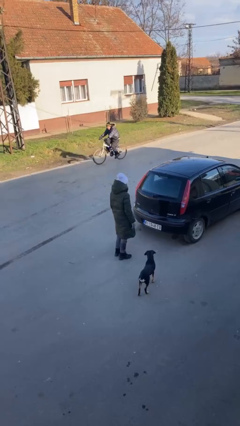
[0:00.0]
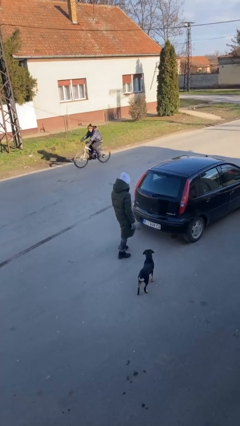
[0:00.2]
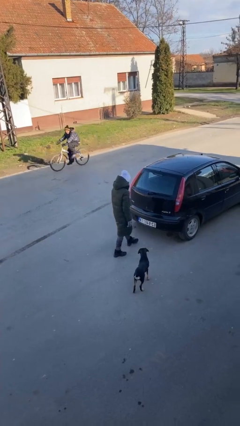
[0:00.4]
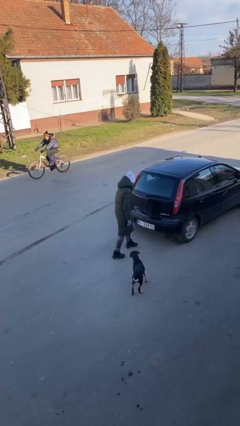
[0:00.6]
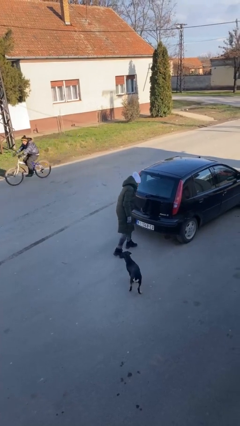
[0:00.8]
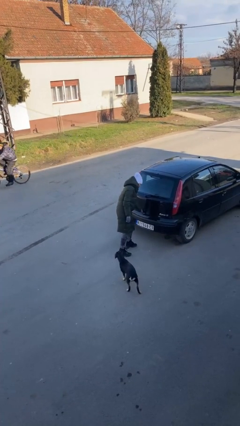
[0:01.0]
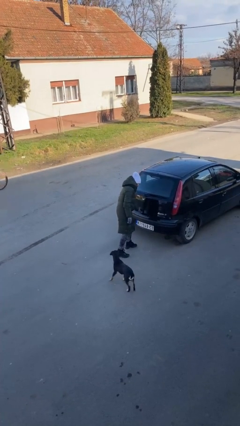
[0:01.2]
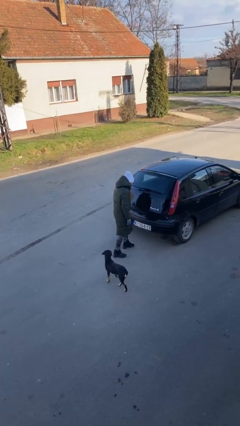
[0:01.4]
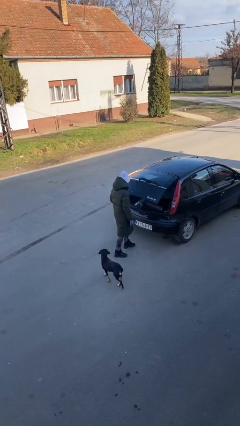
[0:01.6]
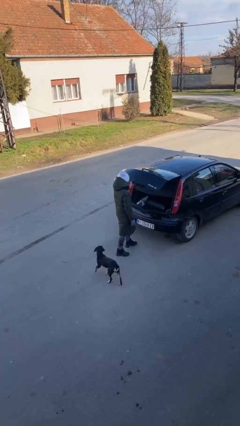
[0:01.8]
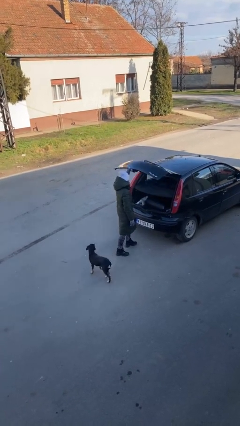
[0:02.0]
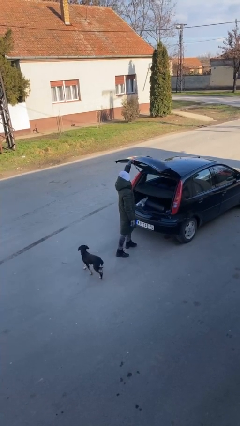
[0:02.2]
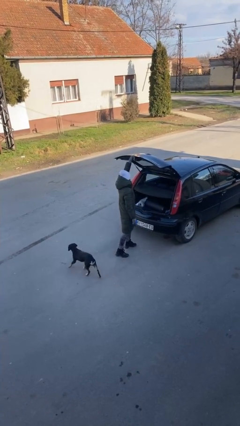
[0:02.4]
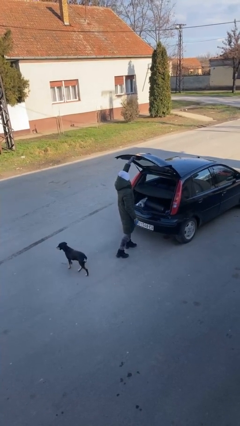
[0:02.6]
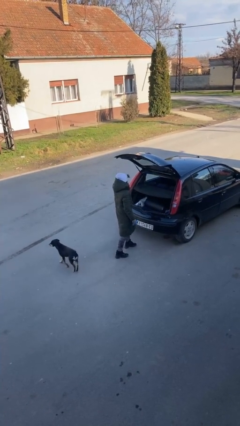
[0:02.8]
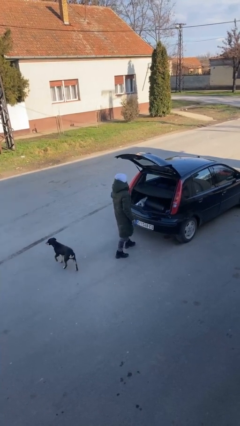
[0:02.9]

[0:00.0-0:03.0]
person opens car trunk

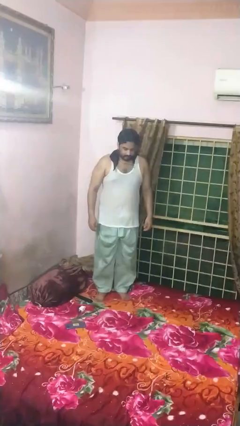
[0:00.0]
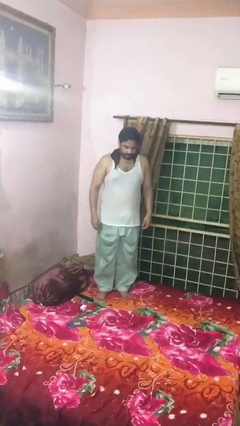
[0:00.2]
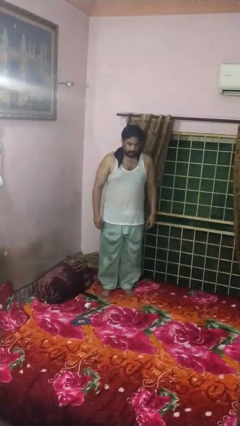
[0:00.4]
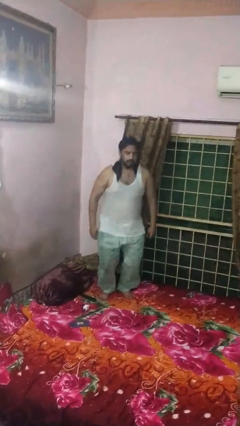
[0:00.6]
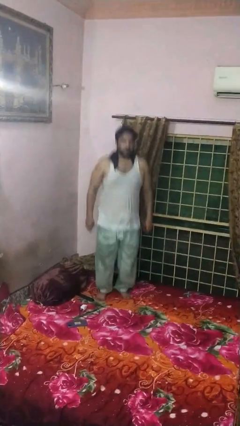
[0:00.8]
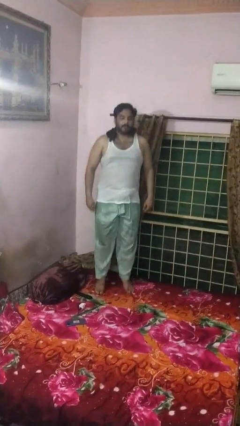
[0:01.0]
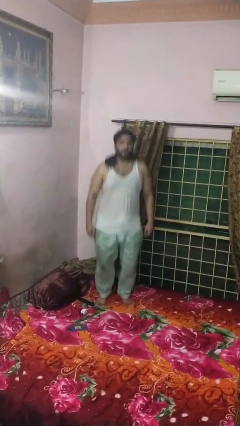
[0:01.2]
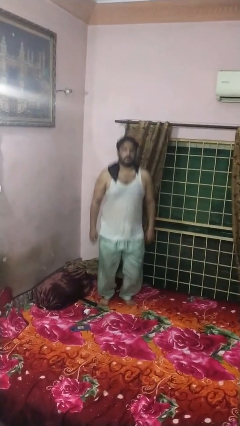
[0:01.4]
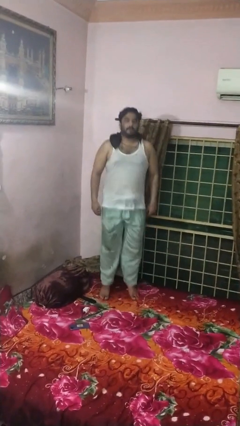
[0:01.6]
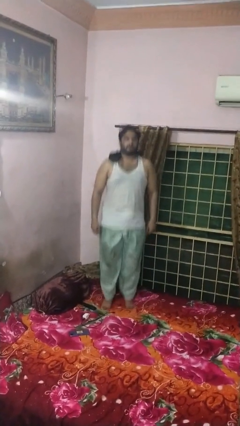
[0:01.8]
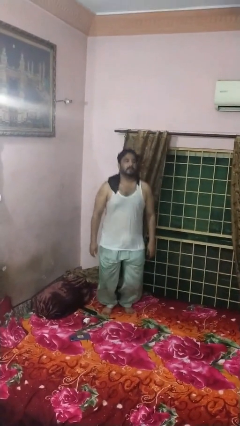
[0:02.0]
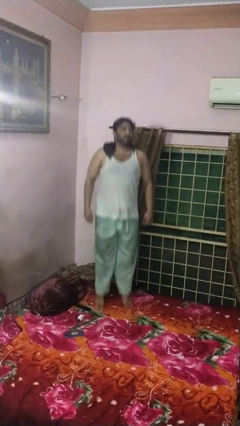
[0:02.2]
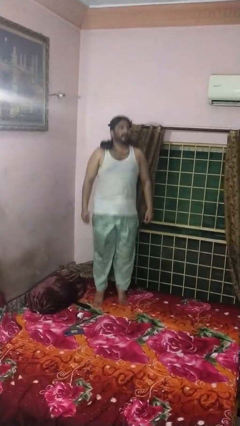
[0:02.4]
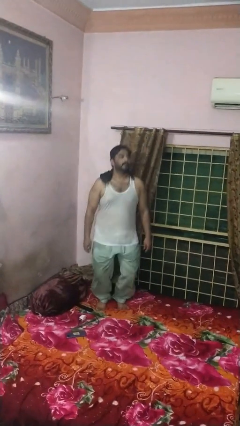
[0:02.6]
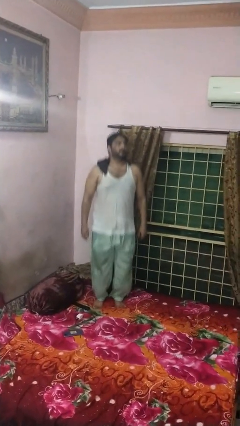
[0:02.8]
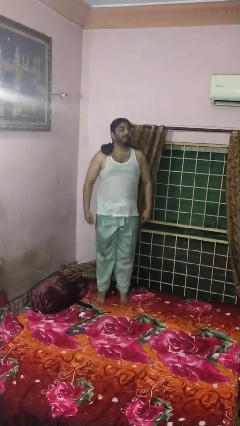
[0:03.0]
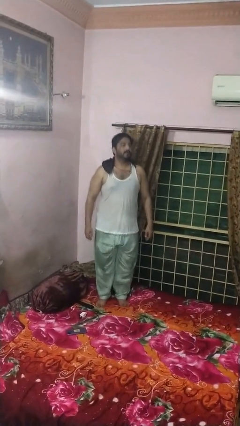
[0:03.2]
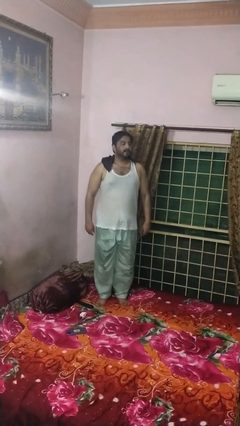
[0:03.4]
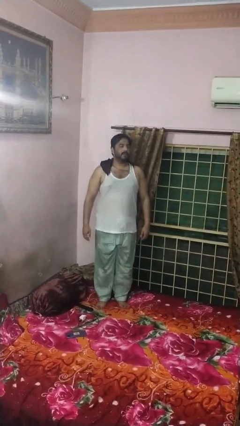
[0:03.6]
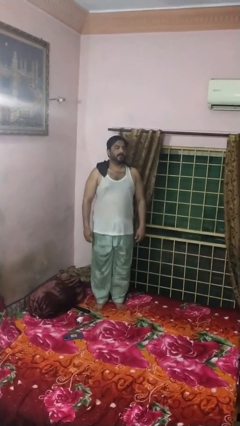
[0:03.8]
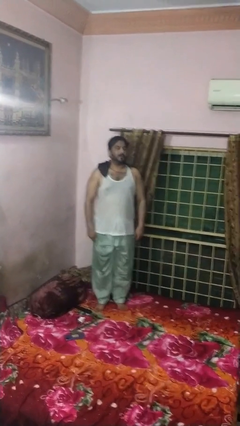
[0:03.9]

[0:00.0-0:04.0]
person jumps on bed

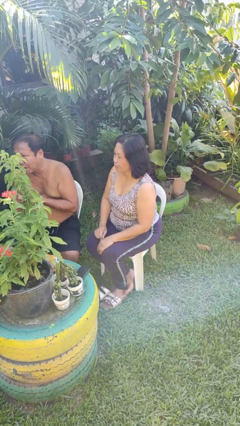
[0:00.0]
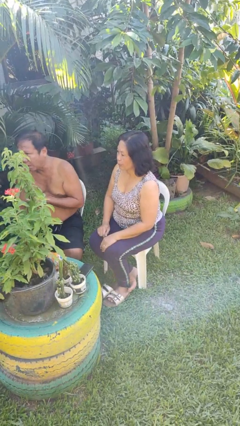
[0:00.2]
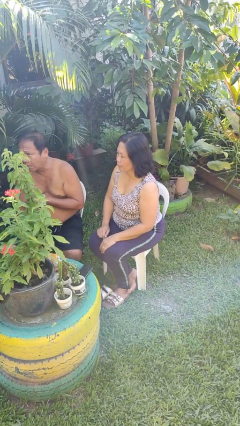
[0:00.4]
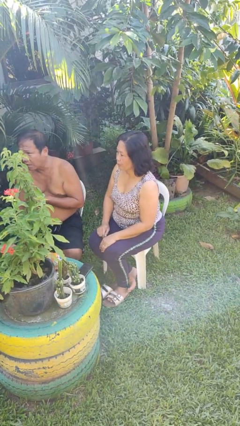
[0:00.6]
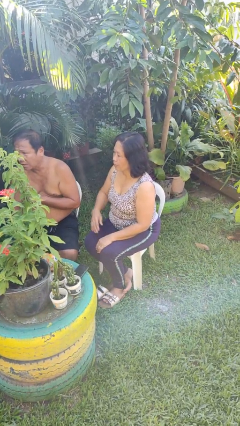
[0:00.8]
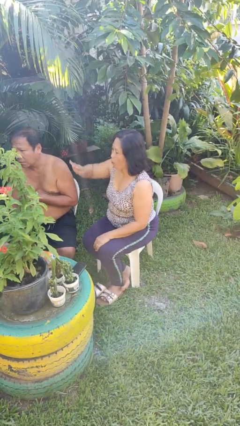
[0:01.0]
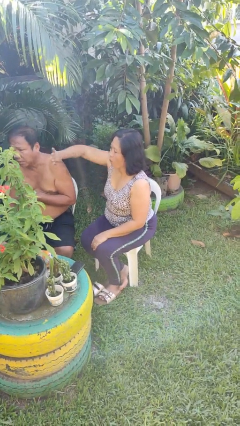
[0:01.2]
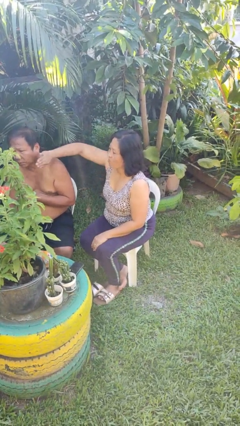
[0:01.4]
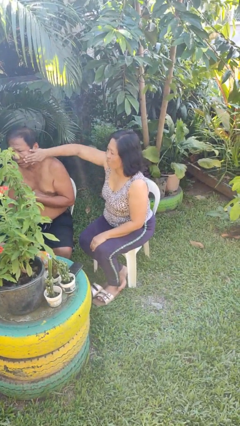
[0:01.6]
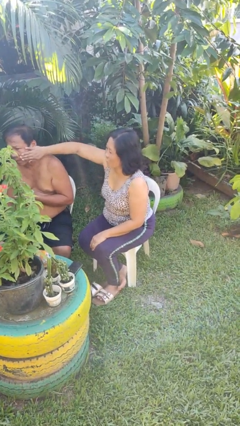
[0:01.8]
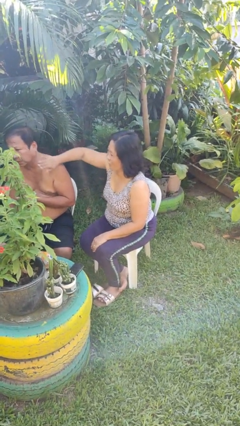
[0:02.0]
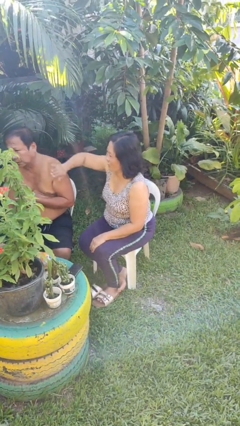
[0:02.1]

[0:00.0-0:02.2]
person touches face of person

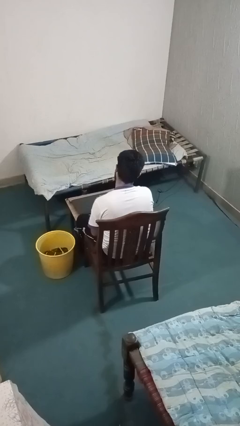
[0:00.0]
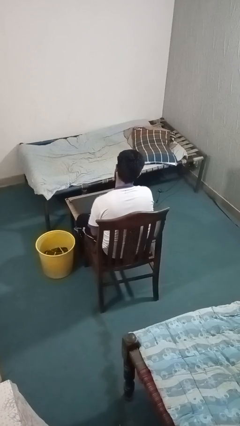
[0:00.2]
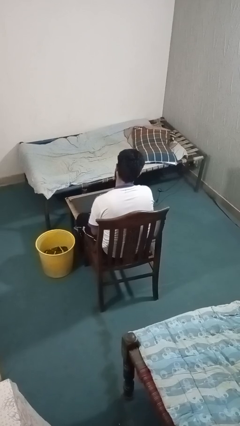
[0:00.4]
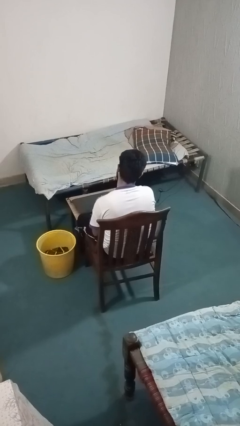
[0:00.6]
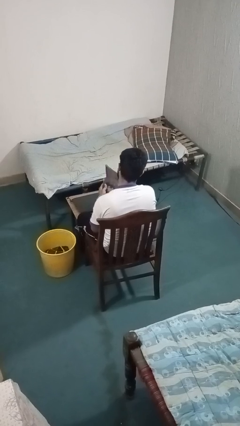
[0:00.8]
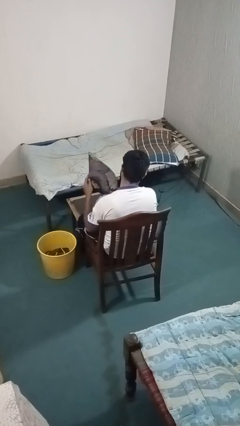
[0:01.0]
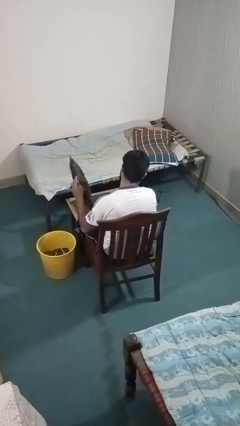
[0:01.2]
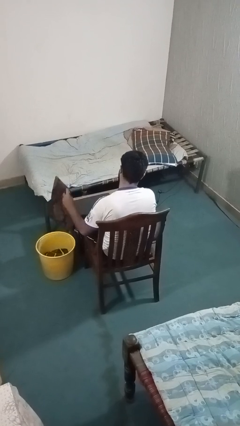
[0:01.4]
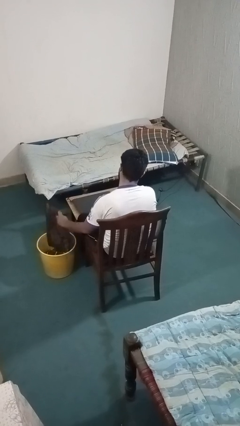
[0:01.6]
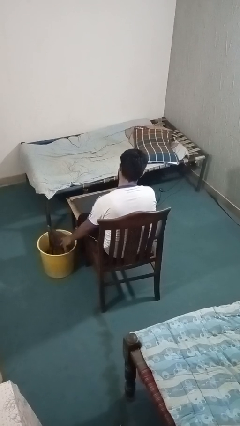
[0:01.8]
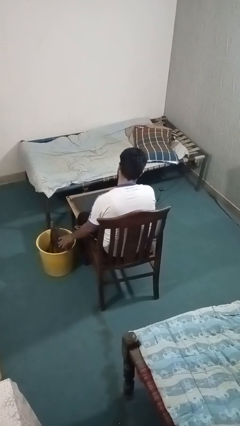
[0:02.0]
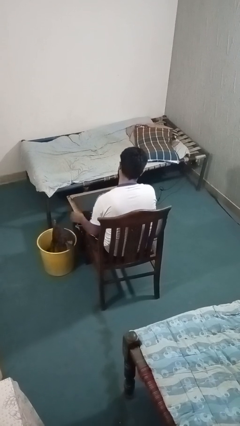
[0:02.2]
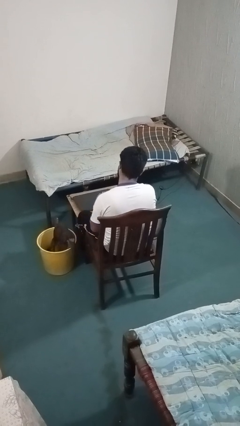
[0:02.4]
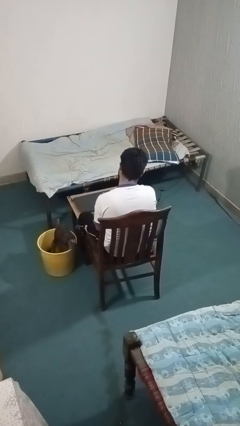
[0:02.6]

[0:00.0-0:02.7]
person puts object into basket

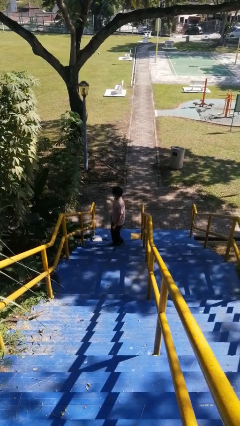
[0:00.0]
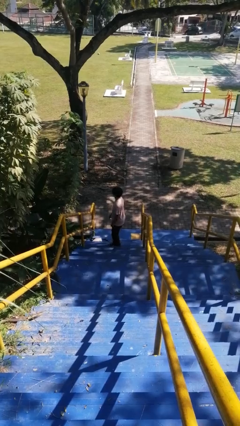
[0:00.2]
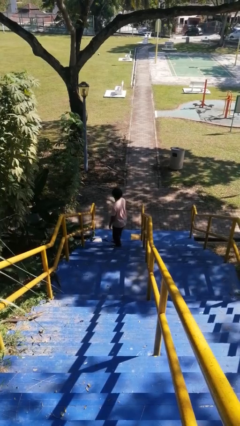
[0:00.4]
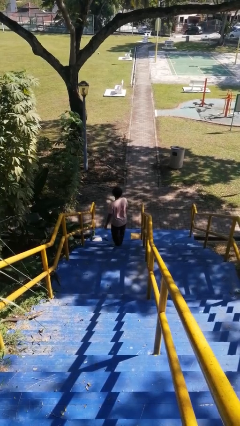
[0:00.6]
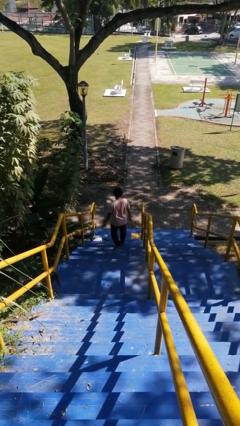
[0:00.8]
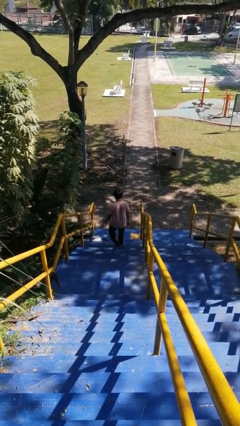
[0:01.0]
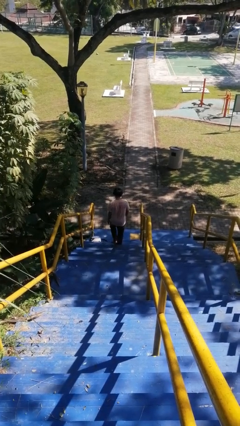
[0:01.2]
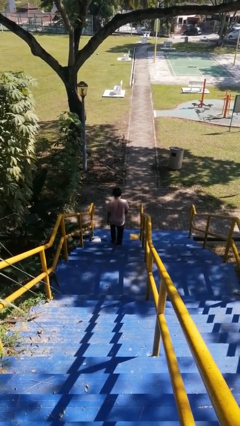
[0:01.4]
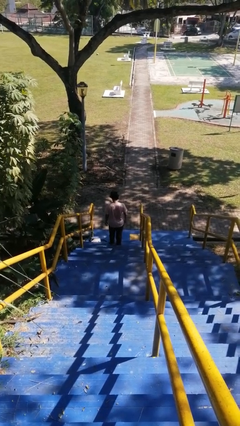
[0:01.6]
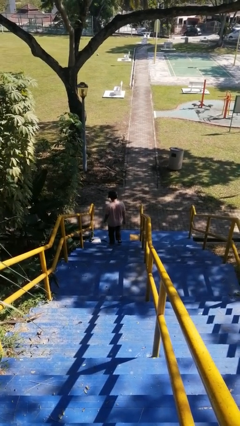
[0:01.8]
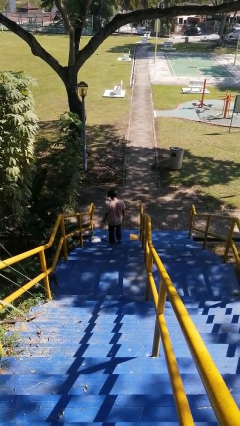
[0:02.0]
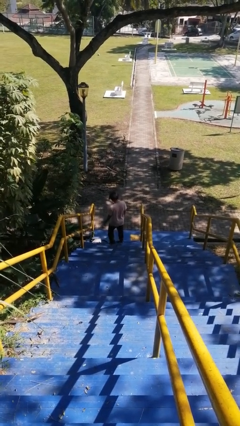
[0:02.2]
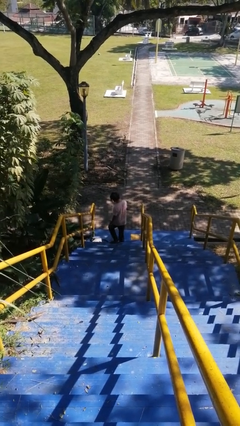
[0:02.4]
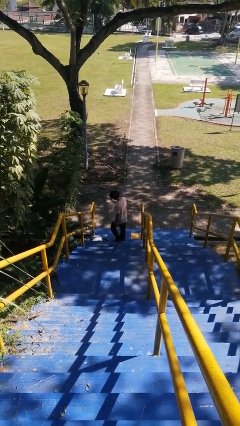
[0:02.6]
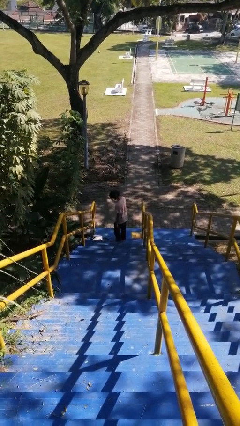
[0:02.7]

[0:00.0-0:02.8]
person climbs down stairs

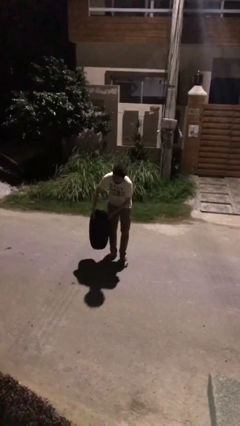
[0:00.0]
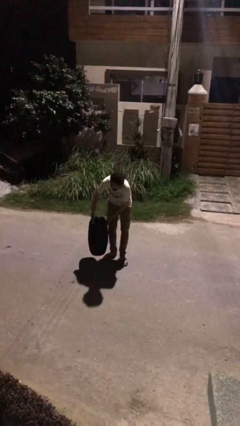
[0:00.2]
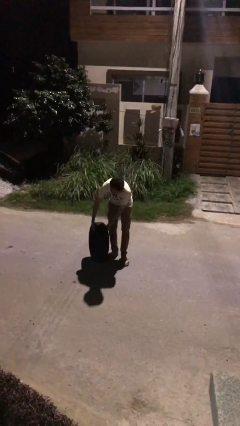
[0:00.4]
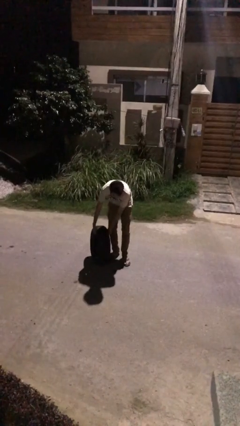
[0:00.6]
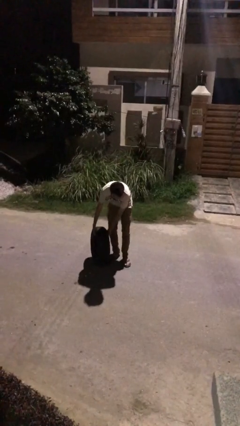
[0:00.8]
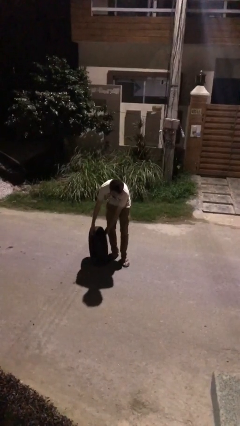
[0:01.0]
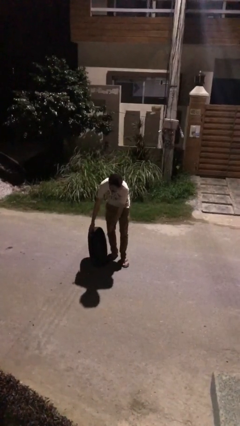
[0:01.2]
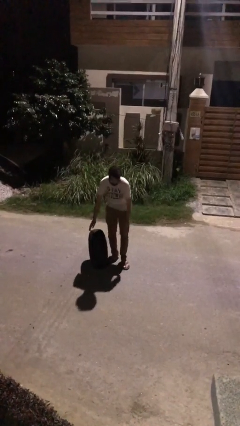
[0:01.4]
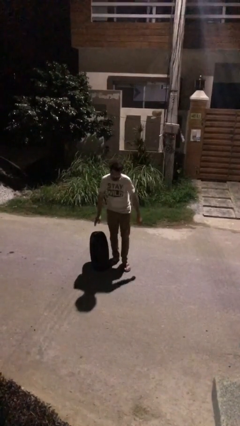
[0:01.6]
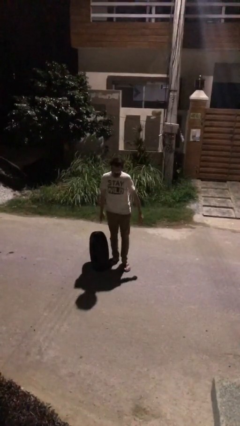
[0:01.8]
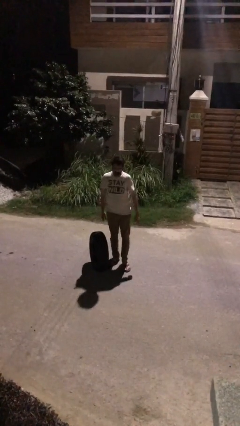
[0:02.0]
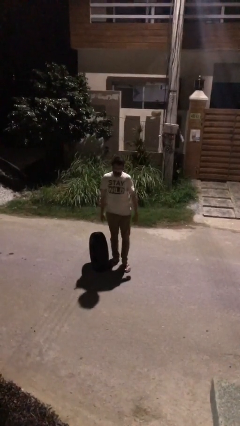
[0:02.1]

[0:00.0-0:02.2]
person puts down object on floor

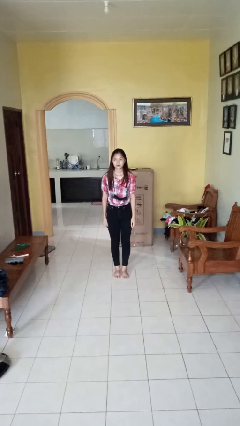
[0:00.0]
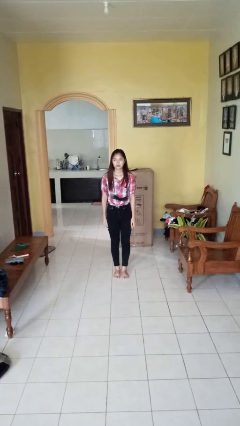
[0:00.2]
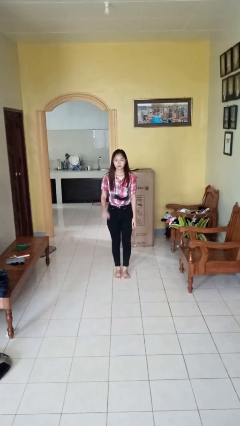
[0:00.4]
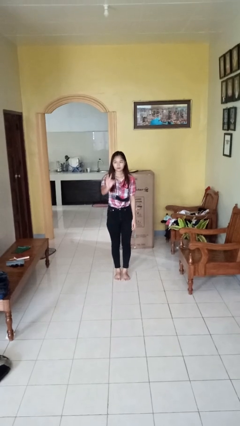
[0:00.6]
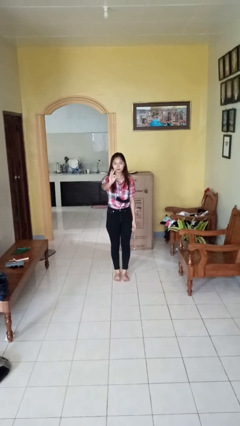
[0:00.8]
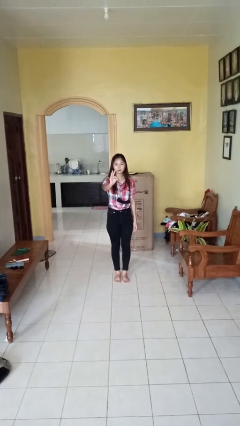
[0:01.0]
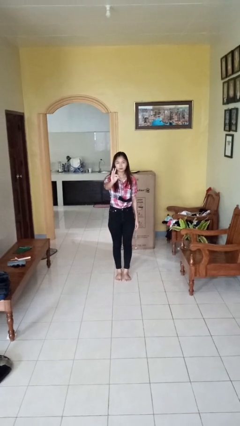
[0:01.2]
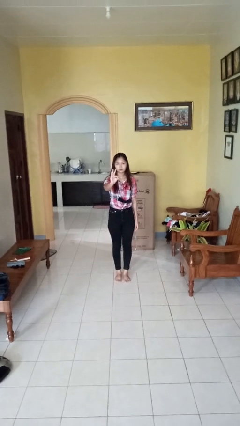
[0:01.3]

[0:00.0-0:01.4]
person gestures number three
